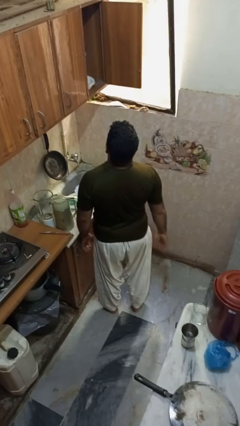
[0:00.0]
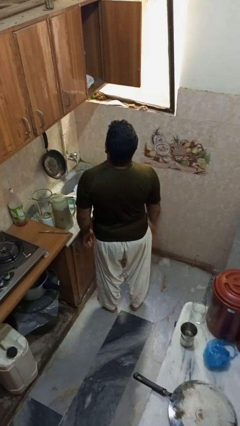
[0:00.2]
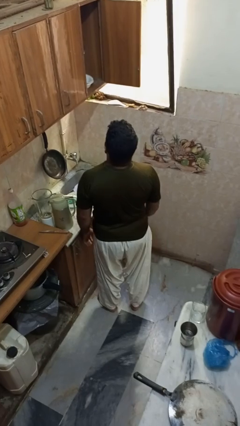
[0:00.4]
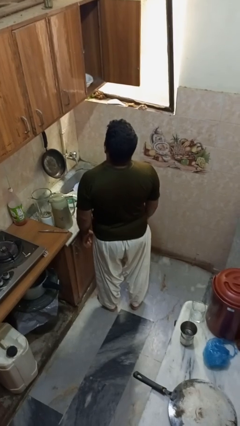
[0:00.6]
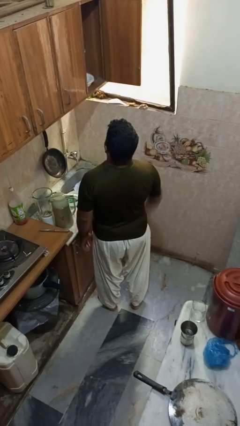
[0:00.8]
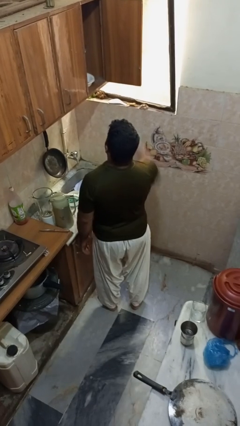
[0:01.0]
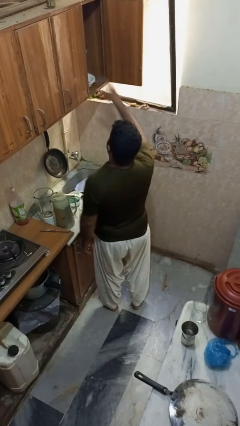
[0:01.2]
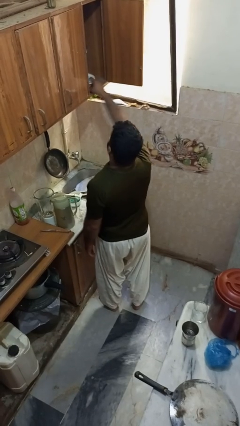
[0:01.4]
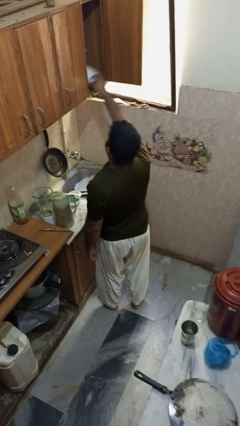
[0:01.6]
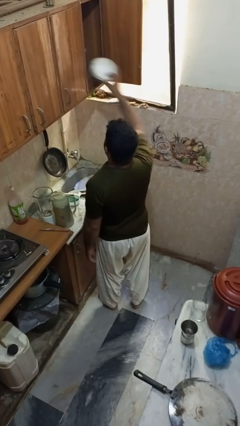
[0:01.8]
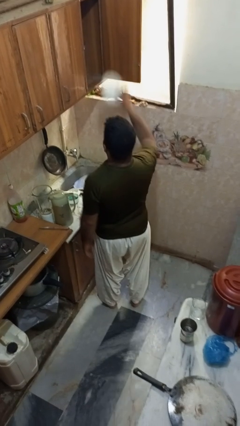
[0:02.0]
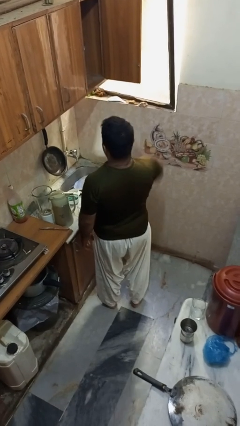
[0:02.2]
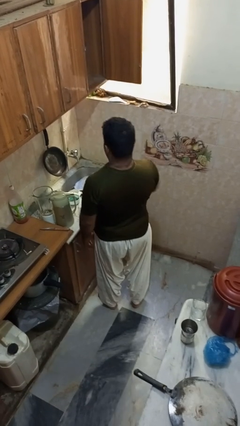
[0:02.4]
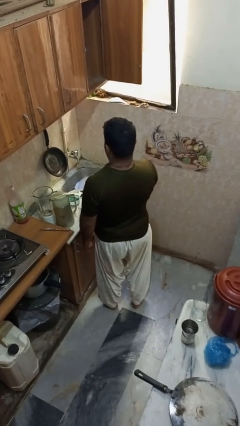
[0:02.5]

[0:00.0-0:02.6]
person takes object from cabinet

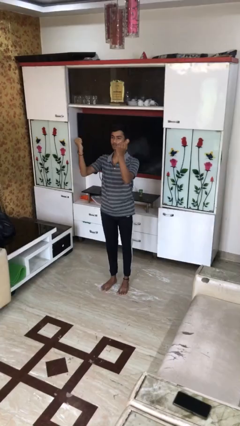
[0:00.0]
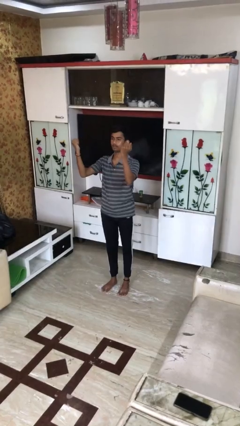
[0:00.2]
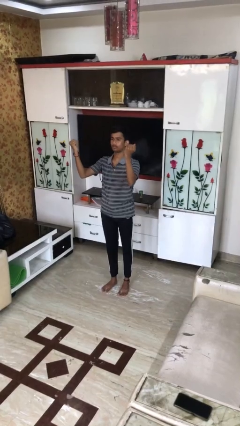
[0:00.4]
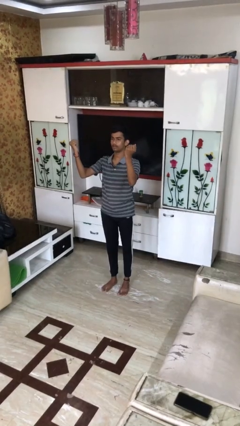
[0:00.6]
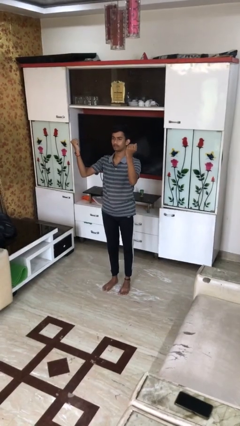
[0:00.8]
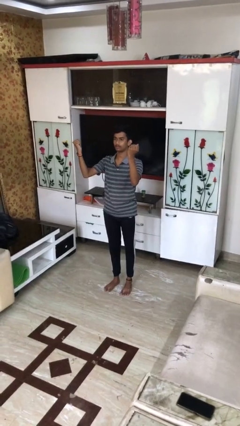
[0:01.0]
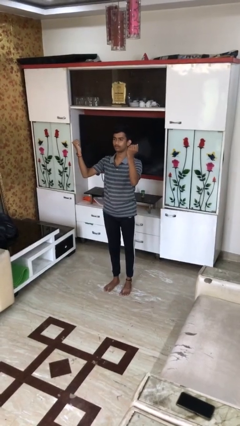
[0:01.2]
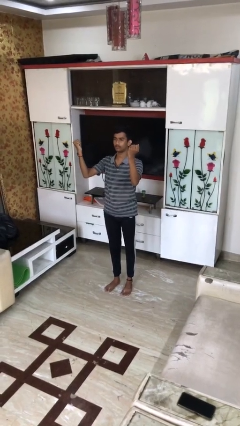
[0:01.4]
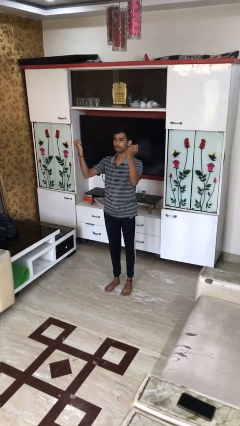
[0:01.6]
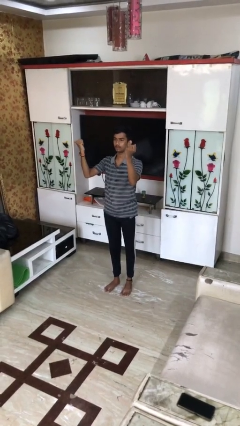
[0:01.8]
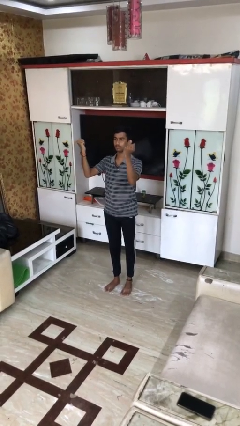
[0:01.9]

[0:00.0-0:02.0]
person gestures zoom in

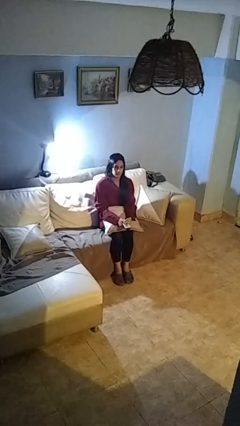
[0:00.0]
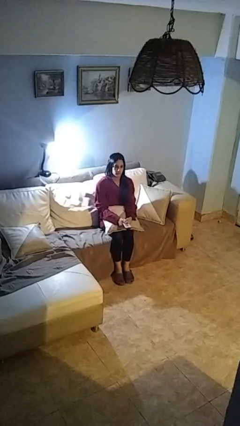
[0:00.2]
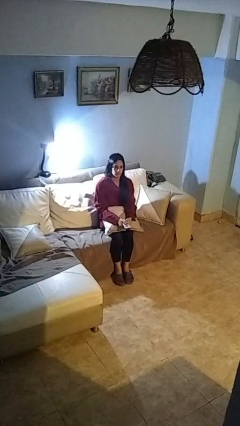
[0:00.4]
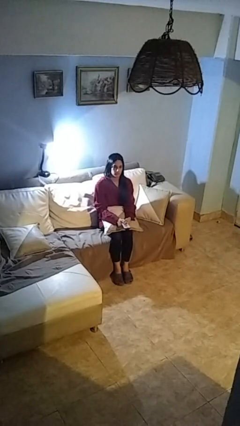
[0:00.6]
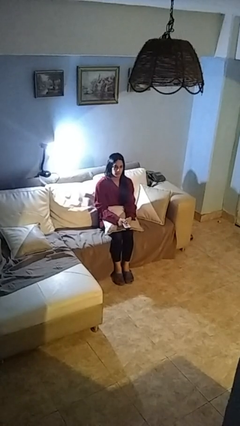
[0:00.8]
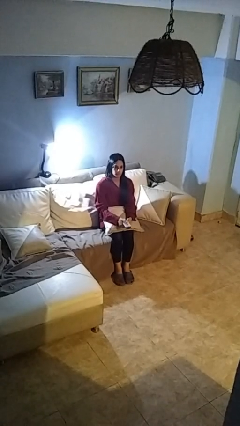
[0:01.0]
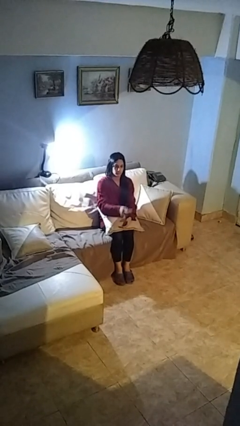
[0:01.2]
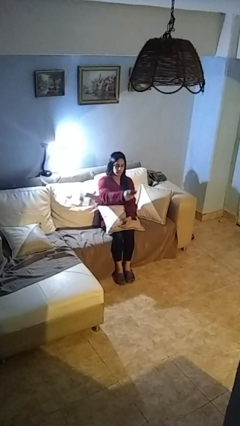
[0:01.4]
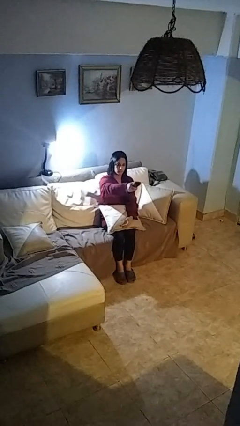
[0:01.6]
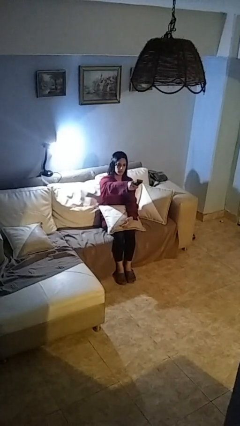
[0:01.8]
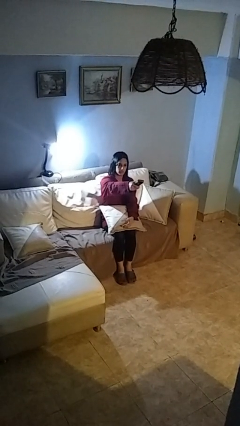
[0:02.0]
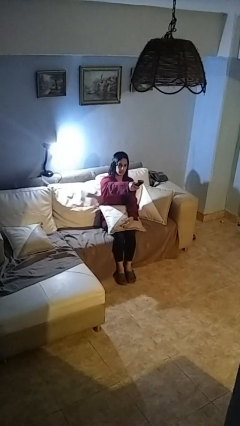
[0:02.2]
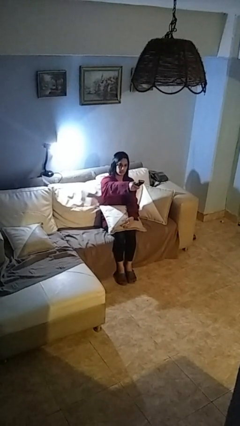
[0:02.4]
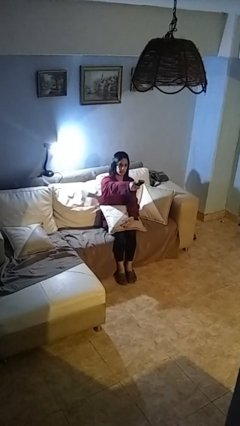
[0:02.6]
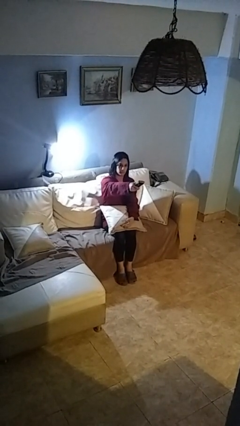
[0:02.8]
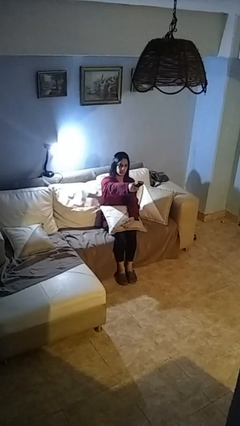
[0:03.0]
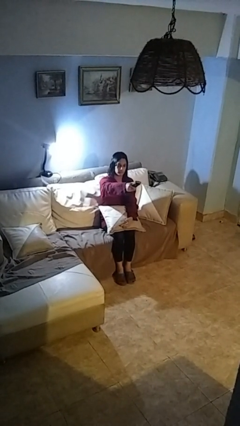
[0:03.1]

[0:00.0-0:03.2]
person uses television remote

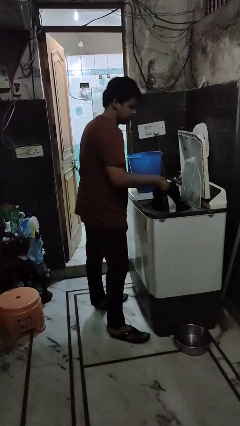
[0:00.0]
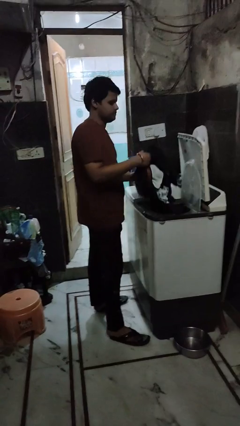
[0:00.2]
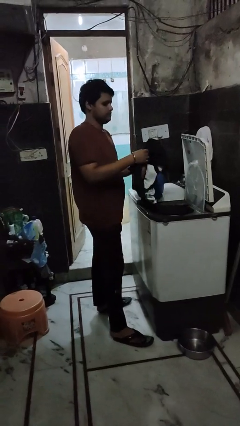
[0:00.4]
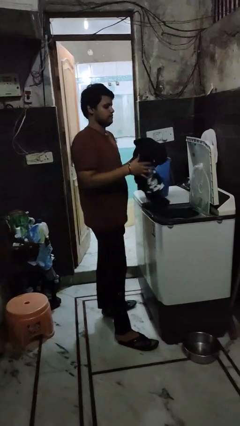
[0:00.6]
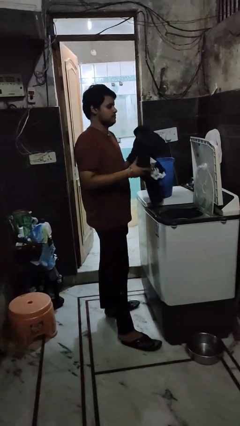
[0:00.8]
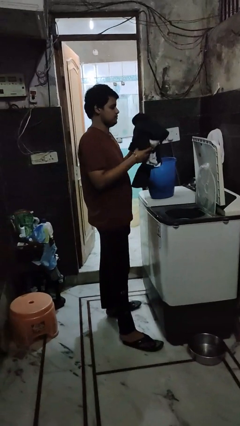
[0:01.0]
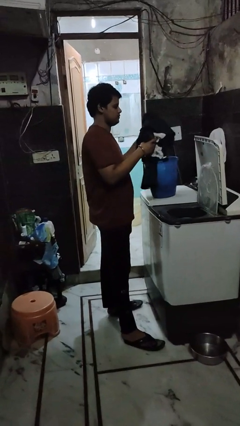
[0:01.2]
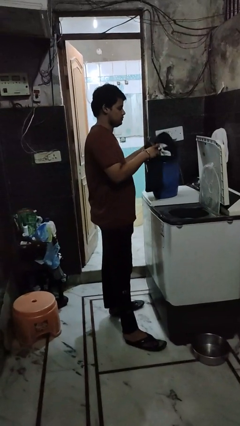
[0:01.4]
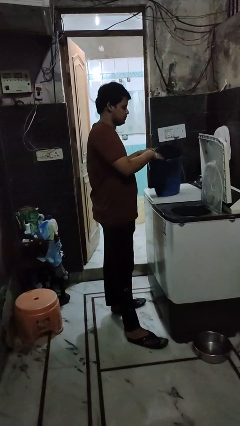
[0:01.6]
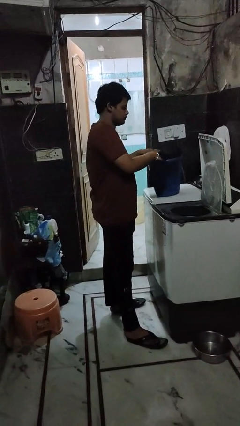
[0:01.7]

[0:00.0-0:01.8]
person unloads dryer

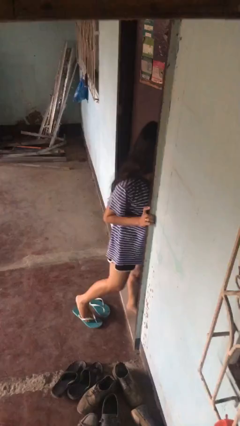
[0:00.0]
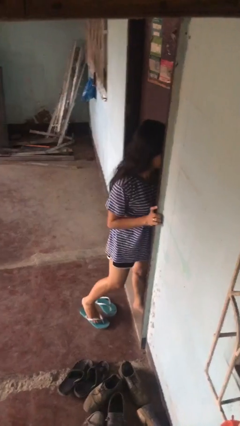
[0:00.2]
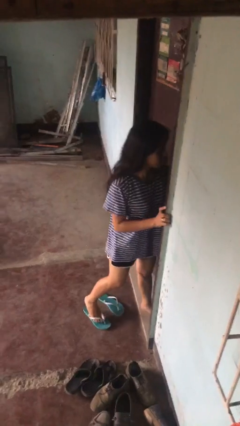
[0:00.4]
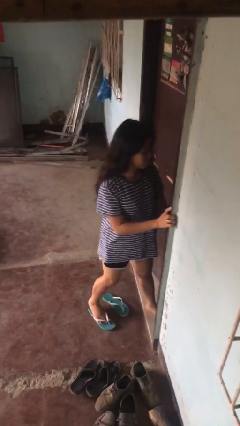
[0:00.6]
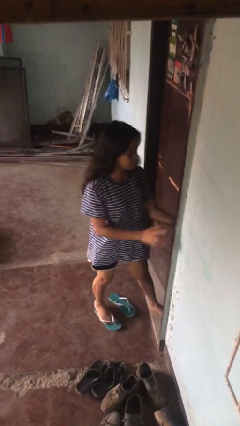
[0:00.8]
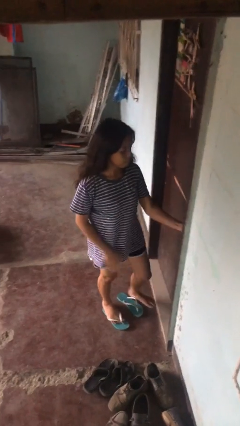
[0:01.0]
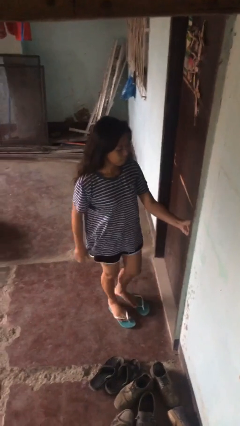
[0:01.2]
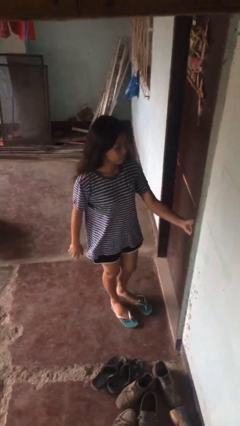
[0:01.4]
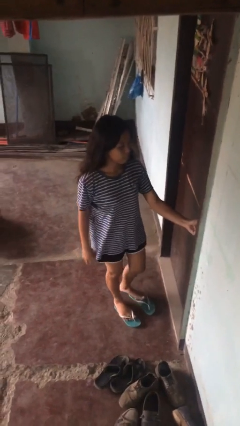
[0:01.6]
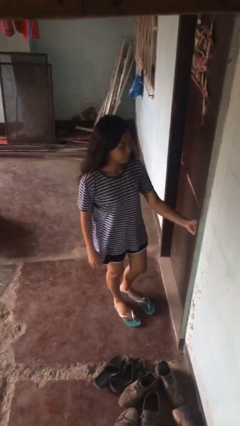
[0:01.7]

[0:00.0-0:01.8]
person closes facility door

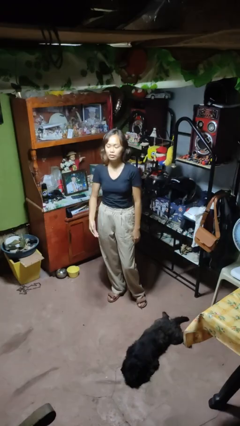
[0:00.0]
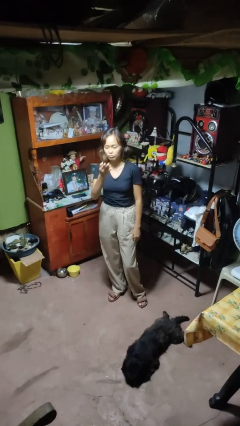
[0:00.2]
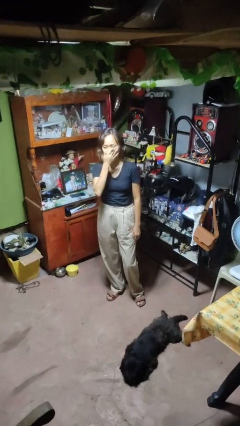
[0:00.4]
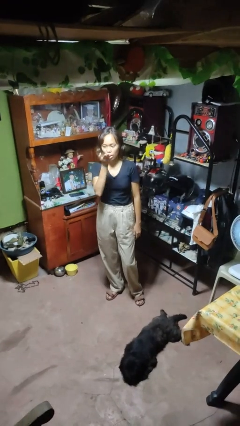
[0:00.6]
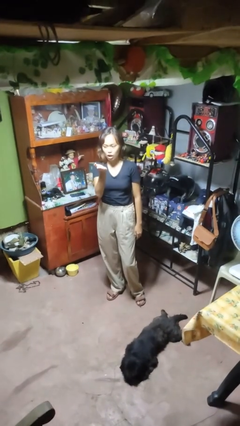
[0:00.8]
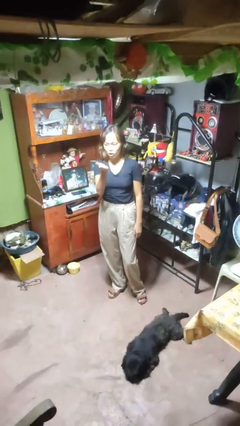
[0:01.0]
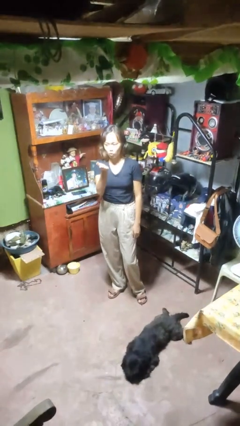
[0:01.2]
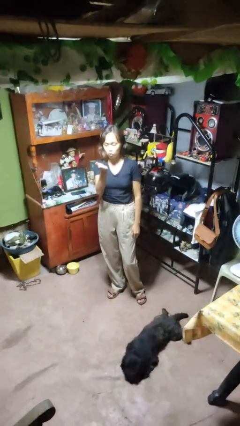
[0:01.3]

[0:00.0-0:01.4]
person gestures blow kiss

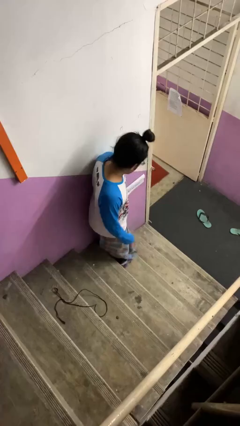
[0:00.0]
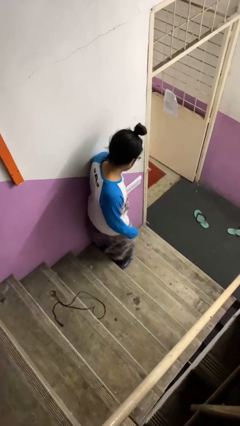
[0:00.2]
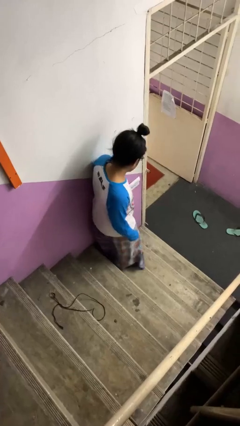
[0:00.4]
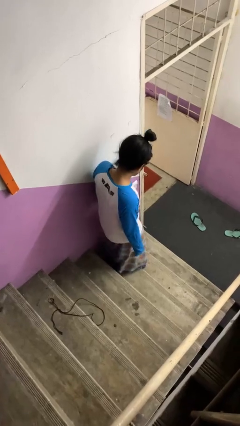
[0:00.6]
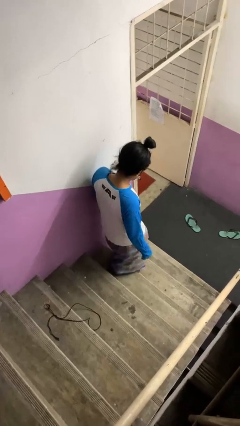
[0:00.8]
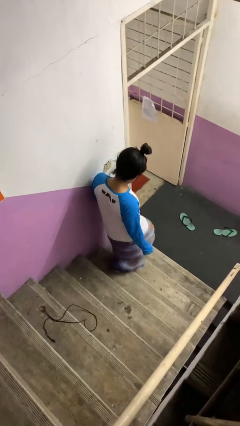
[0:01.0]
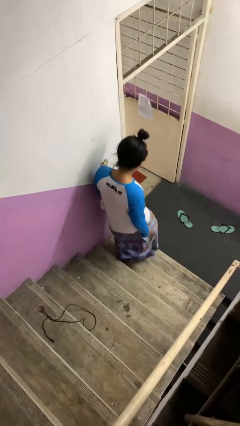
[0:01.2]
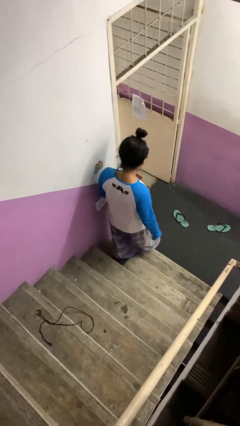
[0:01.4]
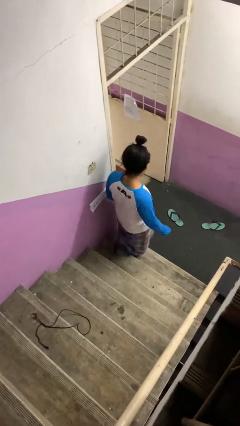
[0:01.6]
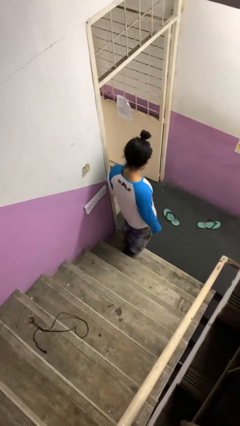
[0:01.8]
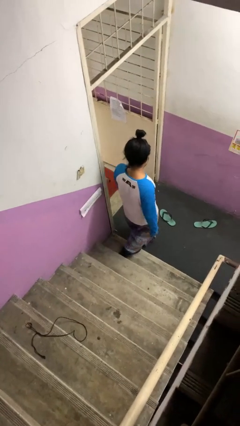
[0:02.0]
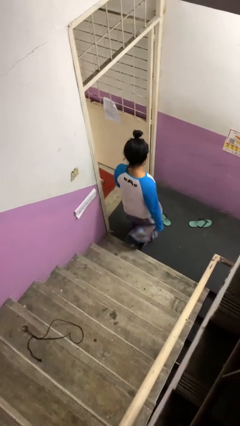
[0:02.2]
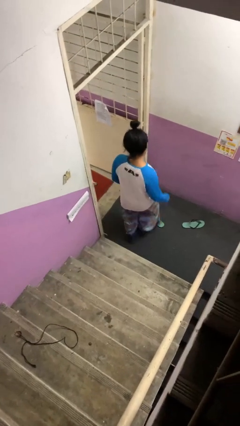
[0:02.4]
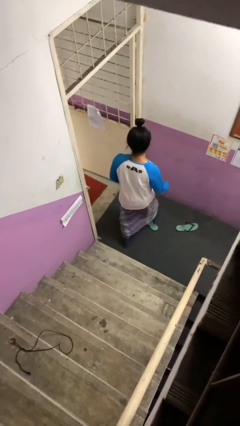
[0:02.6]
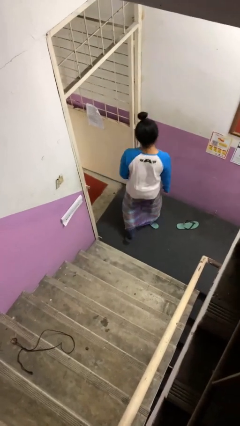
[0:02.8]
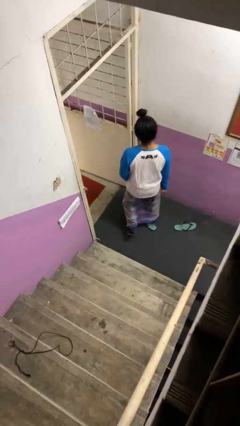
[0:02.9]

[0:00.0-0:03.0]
person climbs down stairs

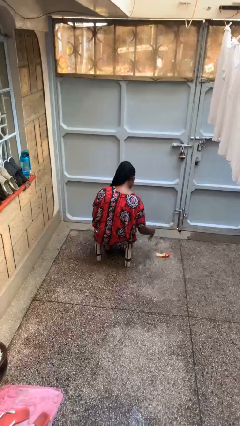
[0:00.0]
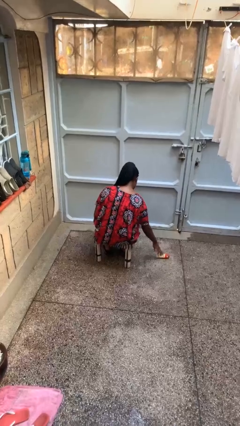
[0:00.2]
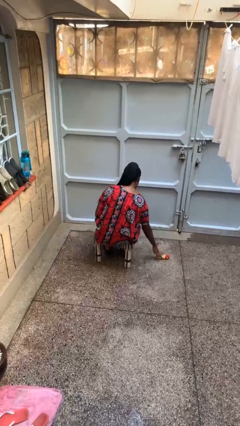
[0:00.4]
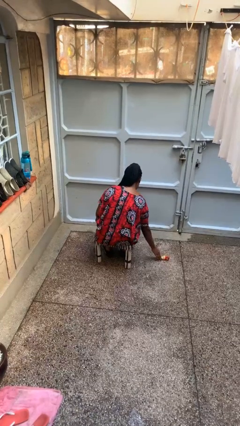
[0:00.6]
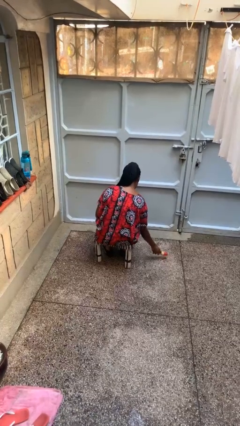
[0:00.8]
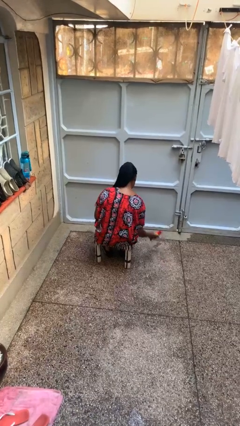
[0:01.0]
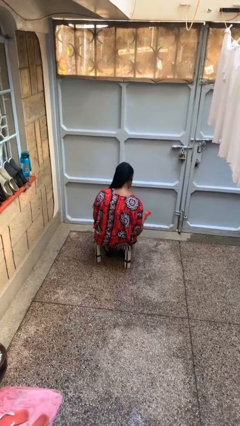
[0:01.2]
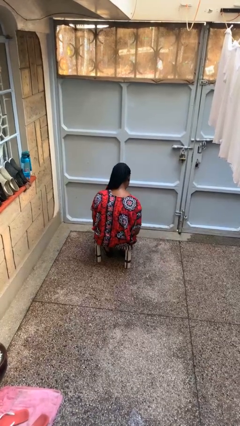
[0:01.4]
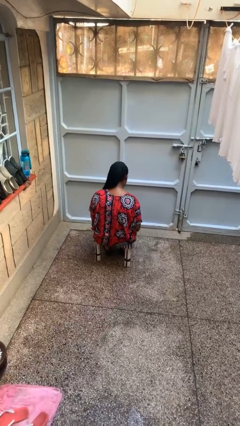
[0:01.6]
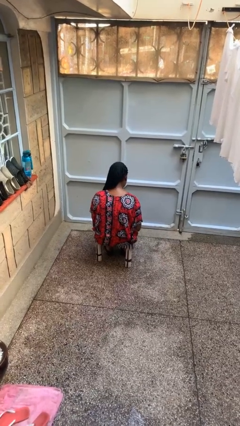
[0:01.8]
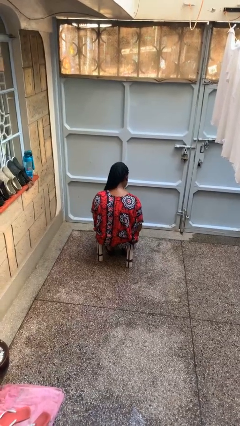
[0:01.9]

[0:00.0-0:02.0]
person picks up object from floor
